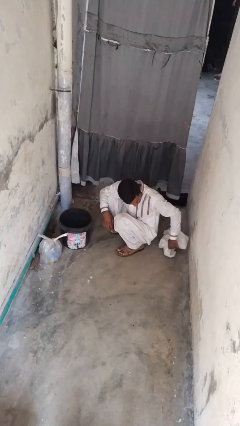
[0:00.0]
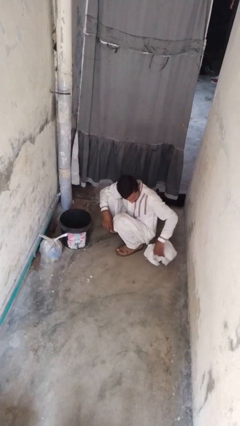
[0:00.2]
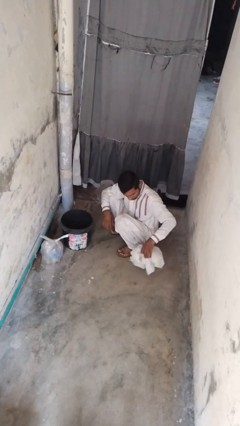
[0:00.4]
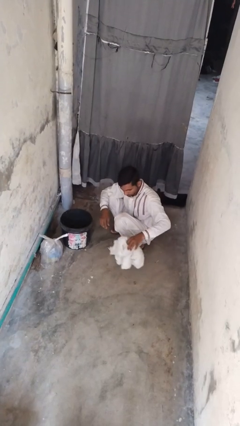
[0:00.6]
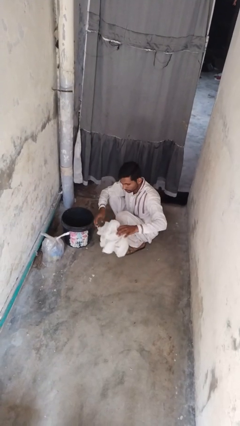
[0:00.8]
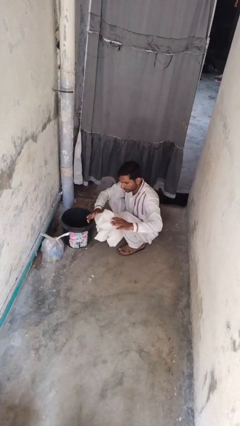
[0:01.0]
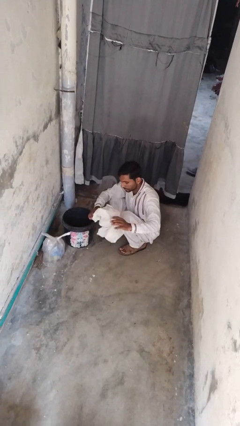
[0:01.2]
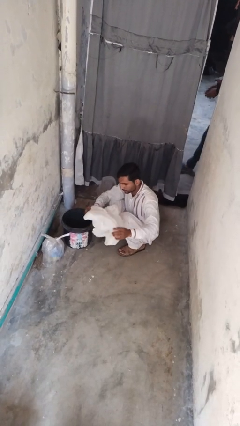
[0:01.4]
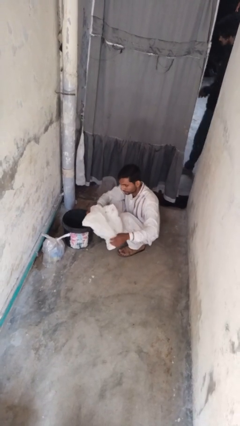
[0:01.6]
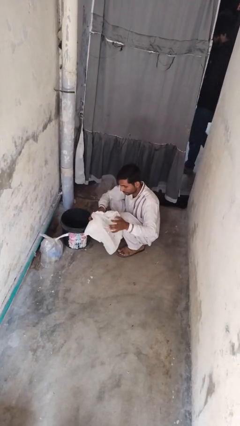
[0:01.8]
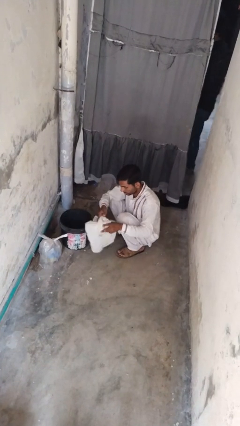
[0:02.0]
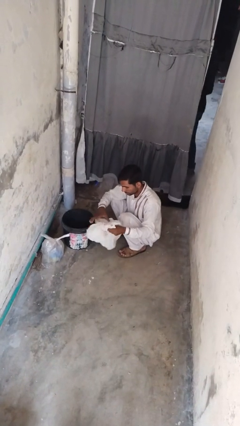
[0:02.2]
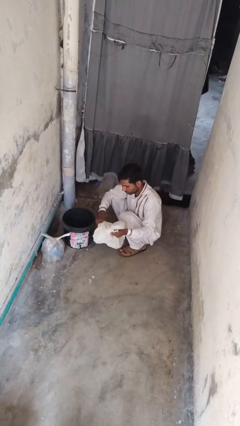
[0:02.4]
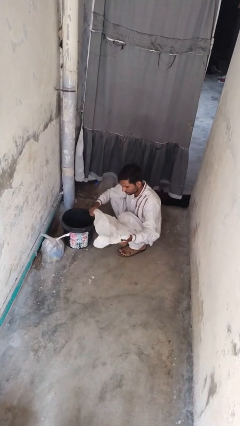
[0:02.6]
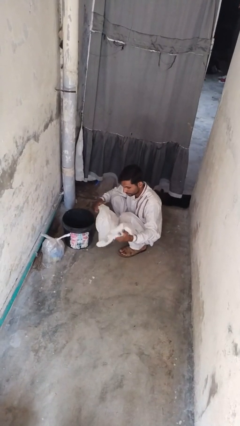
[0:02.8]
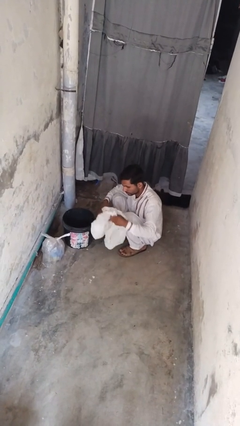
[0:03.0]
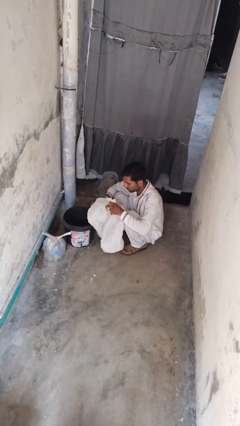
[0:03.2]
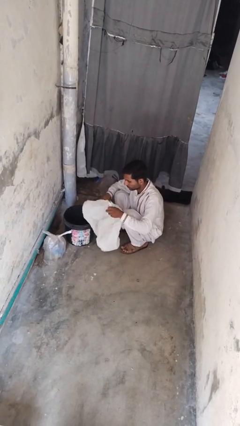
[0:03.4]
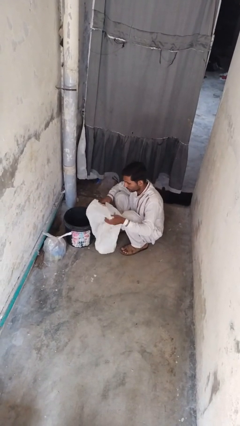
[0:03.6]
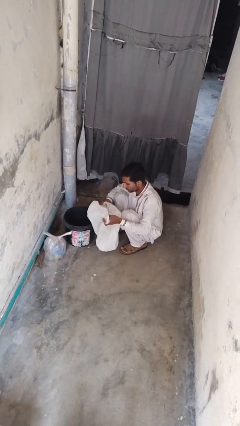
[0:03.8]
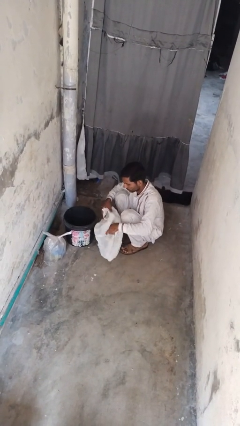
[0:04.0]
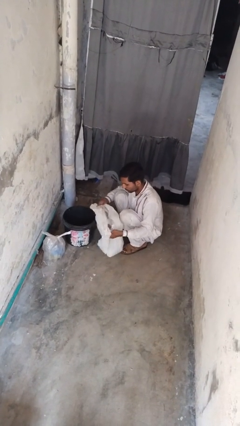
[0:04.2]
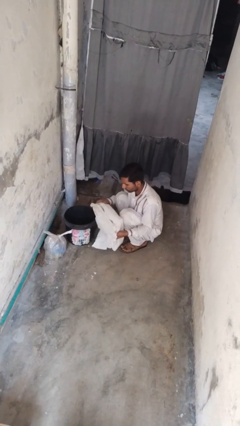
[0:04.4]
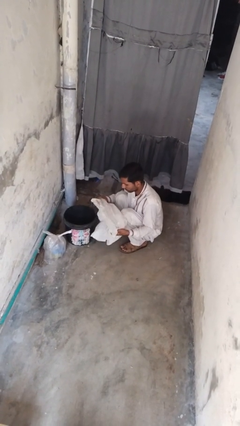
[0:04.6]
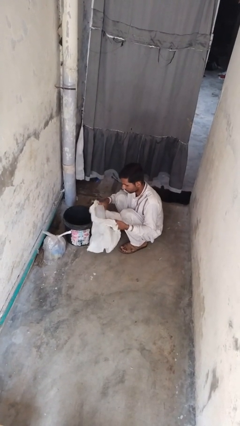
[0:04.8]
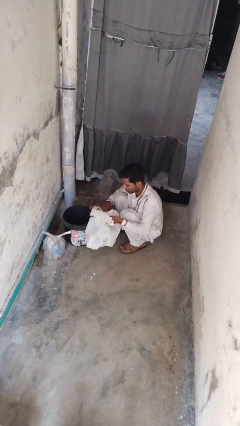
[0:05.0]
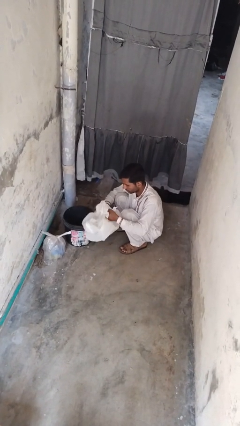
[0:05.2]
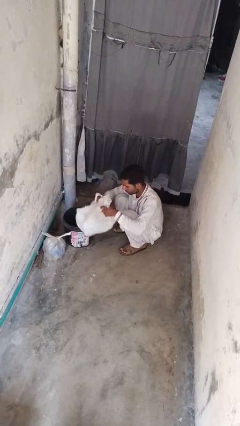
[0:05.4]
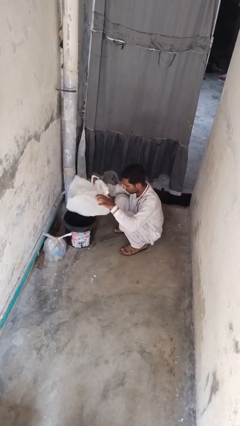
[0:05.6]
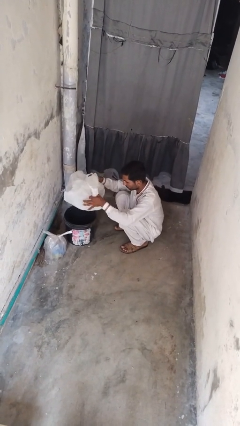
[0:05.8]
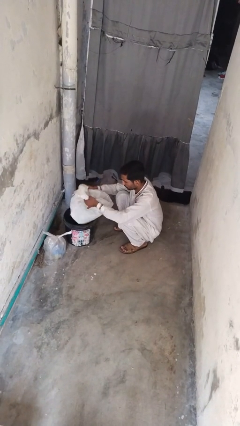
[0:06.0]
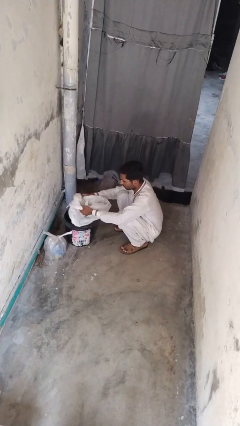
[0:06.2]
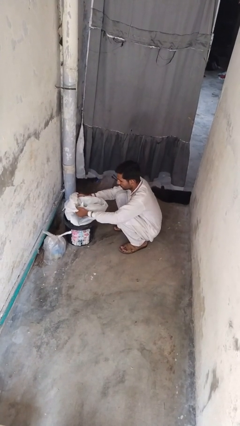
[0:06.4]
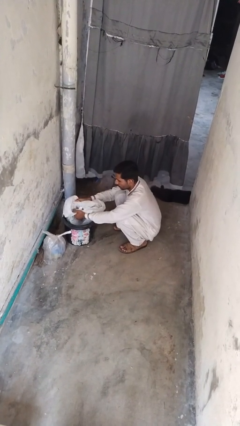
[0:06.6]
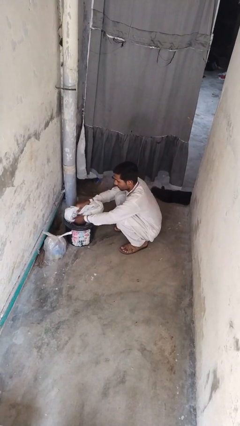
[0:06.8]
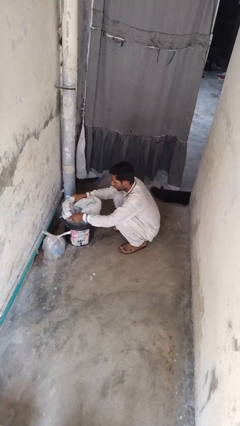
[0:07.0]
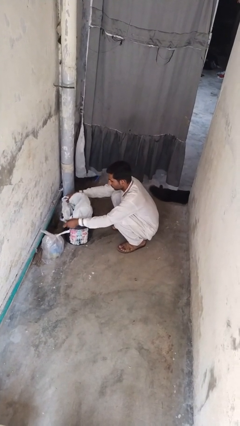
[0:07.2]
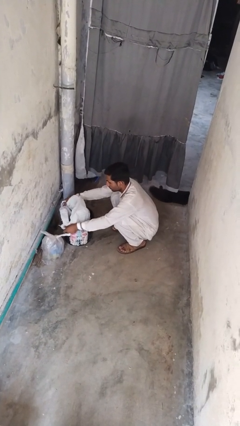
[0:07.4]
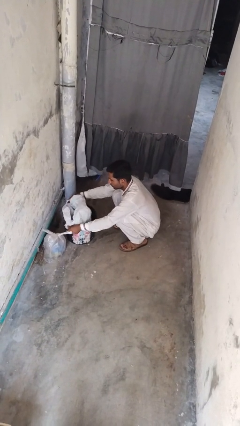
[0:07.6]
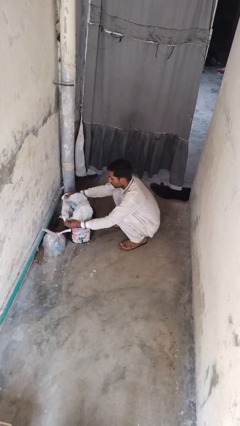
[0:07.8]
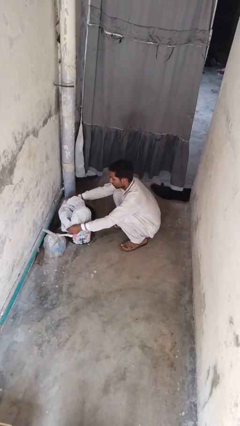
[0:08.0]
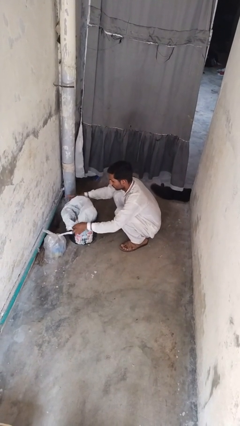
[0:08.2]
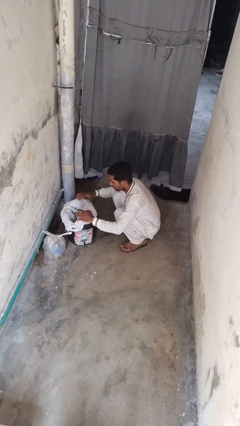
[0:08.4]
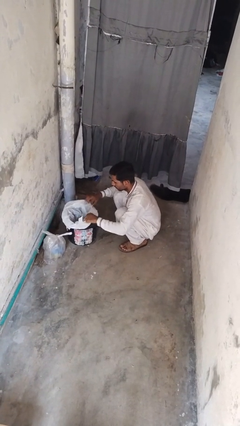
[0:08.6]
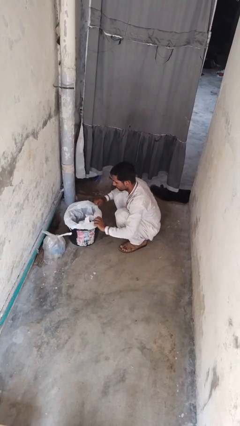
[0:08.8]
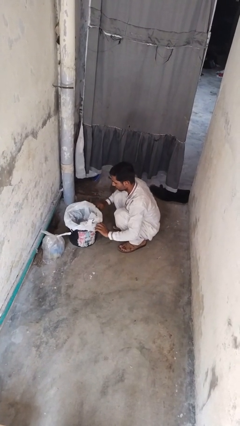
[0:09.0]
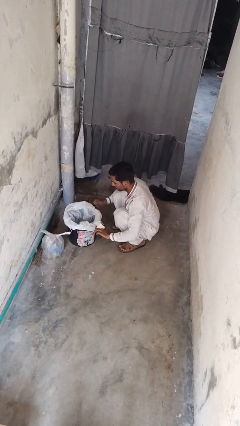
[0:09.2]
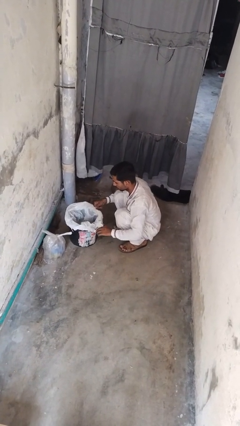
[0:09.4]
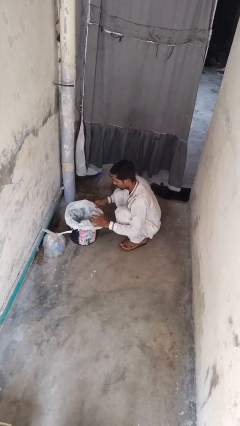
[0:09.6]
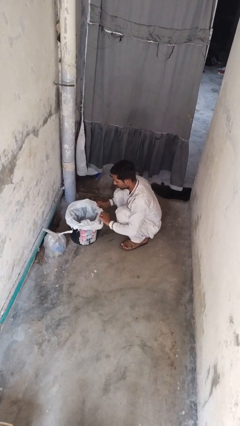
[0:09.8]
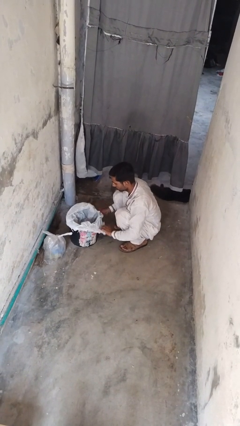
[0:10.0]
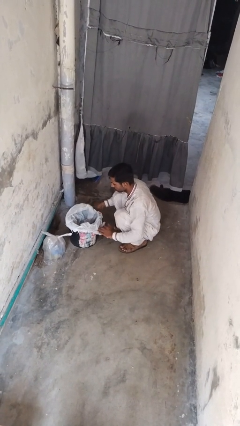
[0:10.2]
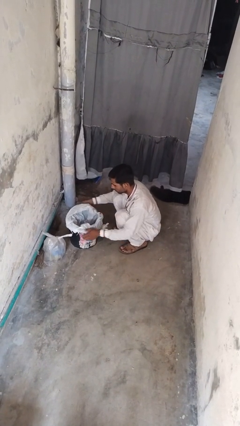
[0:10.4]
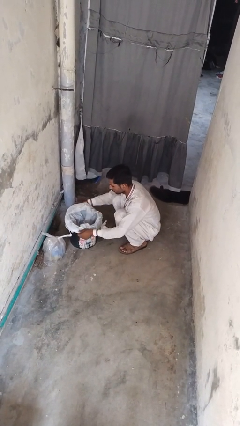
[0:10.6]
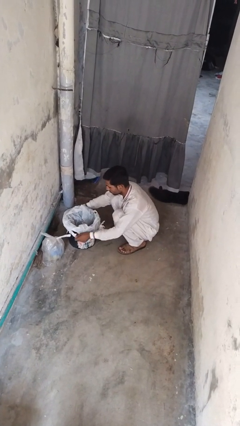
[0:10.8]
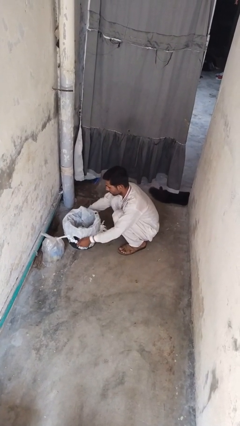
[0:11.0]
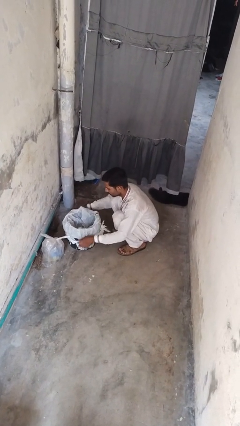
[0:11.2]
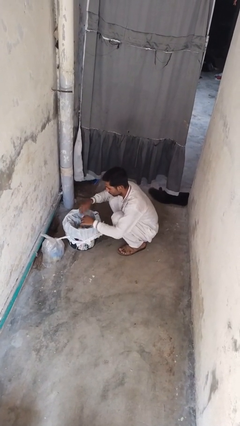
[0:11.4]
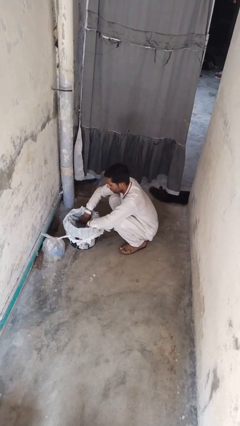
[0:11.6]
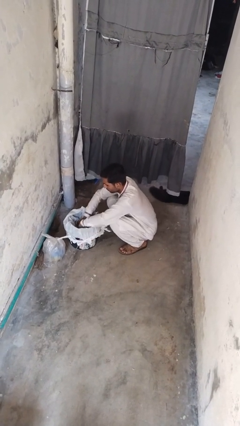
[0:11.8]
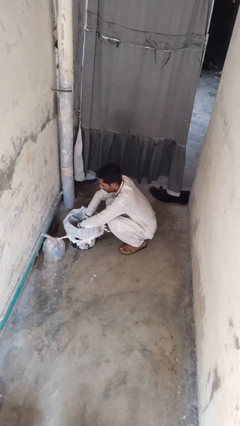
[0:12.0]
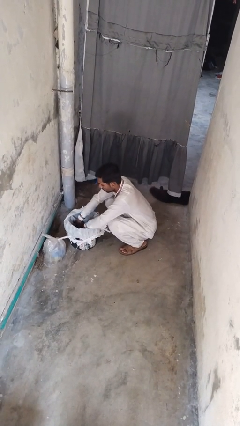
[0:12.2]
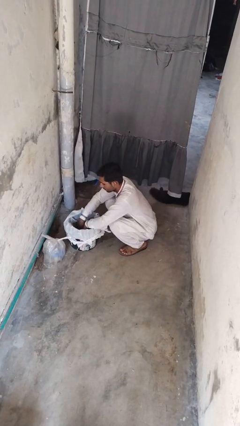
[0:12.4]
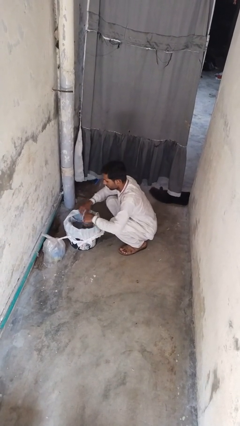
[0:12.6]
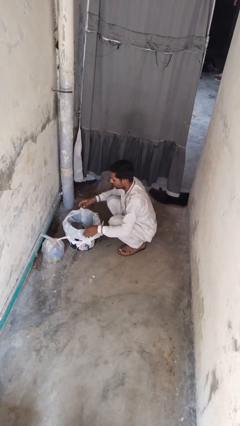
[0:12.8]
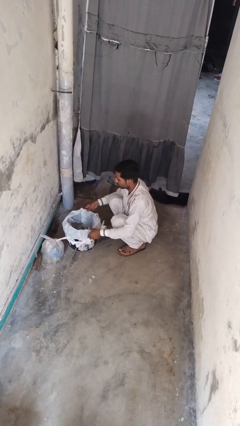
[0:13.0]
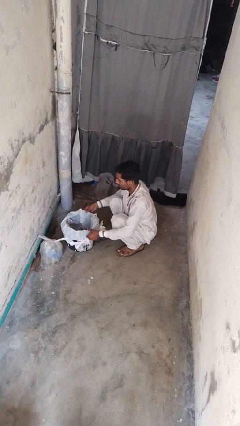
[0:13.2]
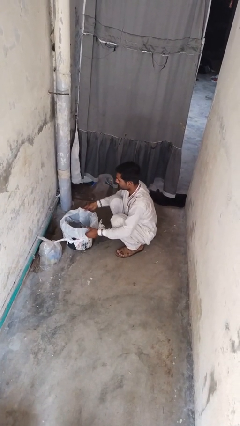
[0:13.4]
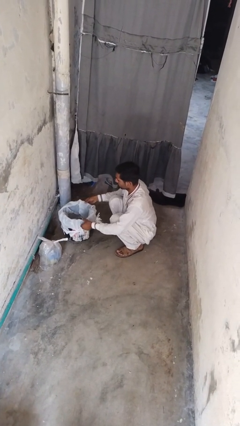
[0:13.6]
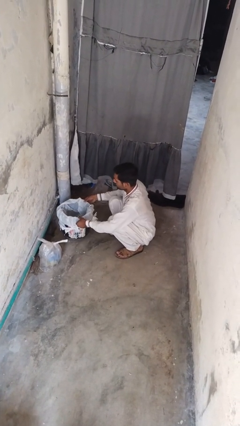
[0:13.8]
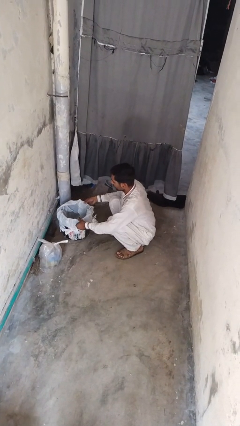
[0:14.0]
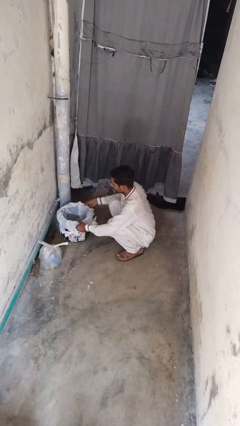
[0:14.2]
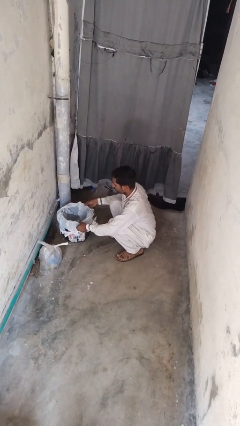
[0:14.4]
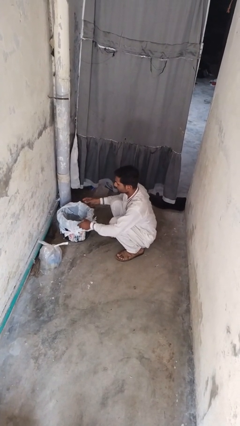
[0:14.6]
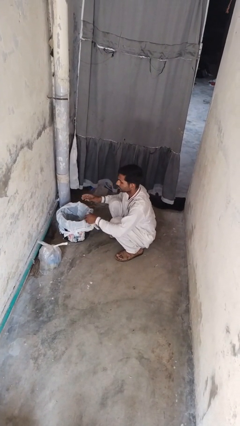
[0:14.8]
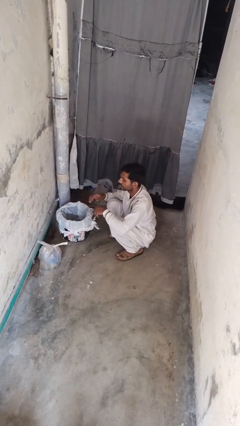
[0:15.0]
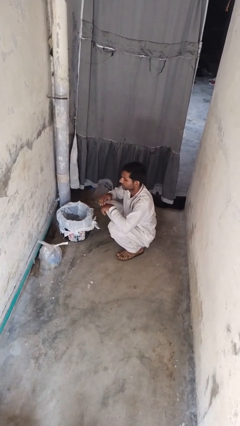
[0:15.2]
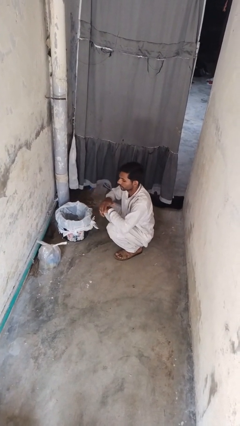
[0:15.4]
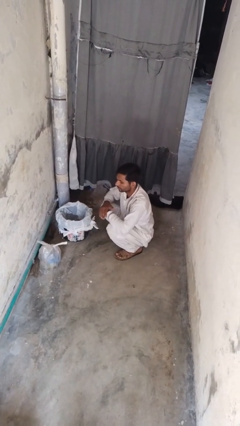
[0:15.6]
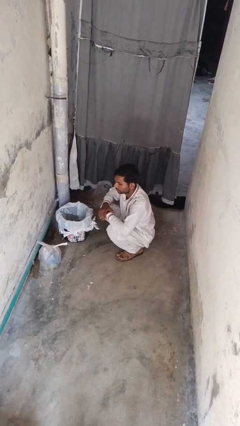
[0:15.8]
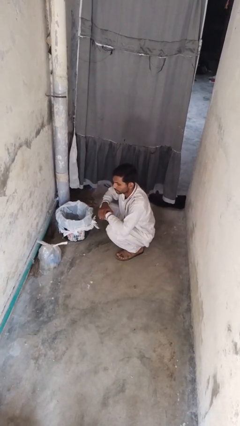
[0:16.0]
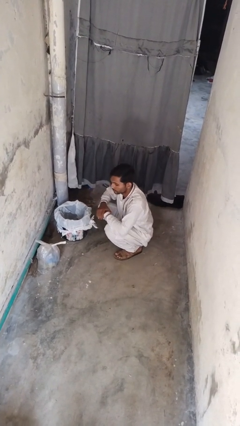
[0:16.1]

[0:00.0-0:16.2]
person inserts trashbag into trashcan

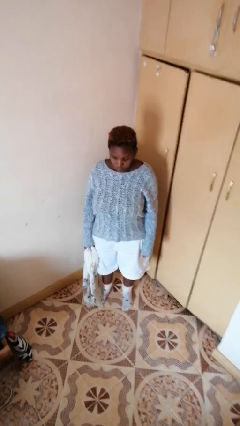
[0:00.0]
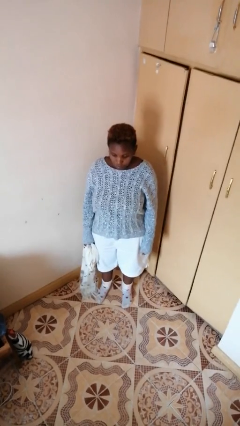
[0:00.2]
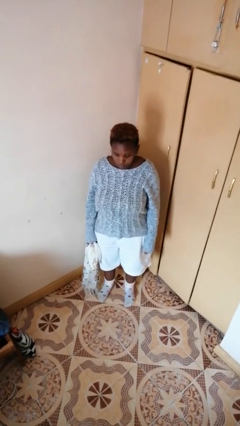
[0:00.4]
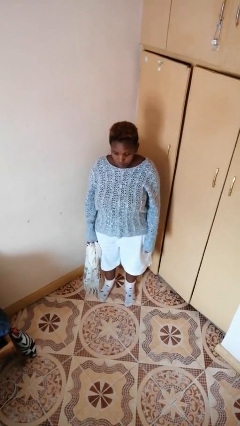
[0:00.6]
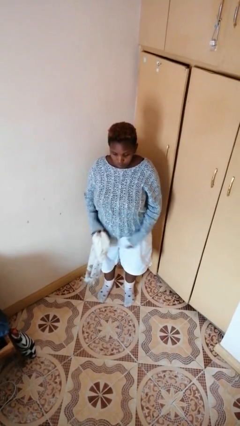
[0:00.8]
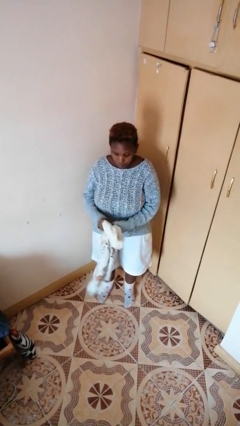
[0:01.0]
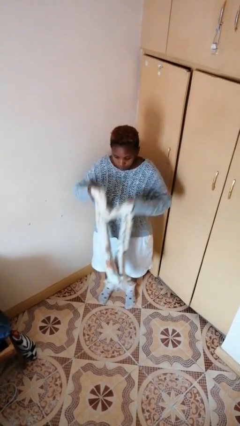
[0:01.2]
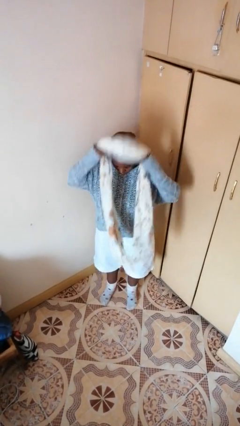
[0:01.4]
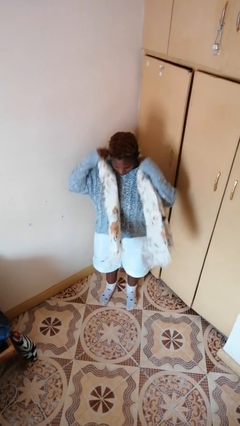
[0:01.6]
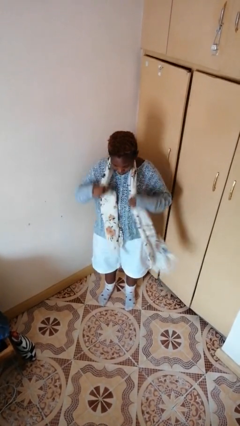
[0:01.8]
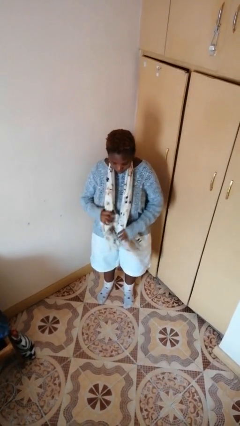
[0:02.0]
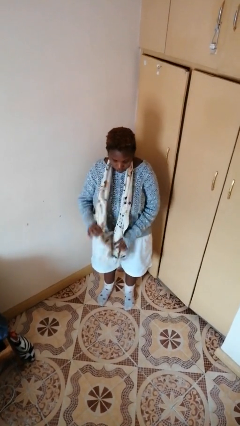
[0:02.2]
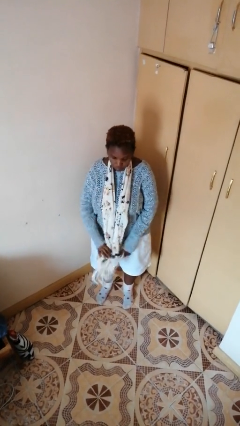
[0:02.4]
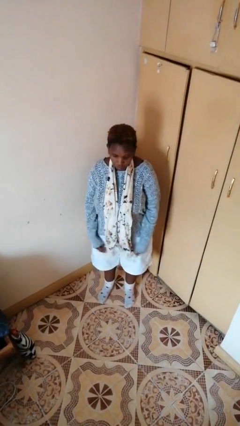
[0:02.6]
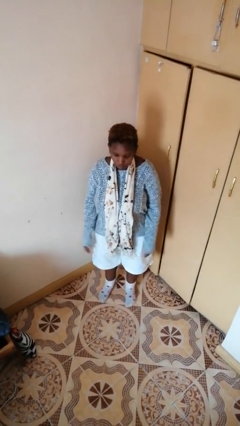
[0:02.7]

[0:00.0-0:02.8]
person puts on scarf
